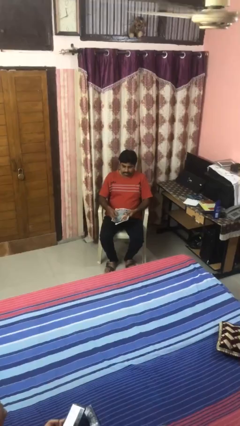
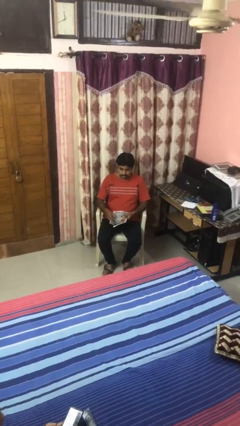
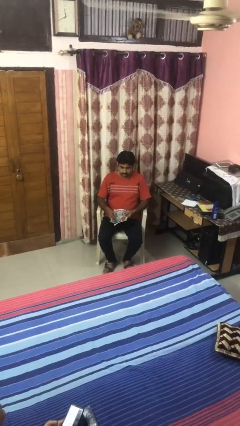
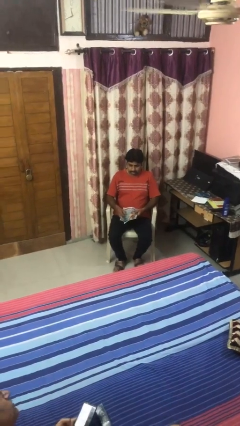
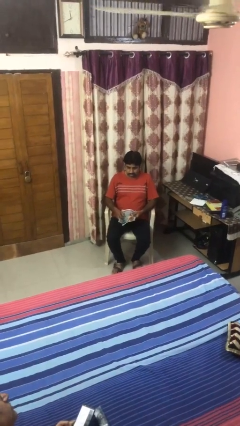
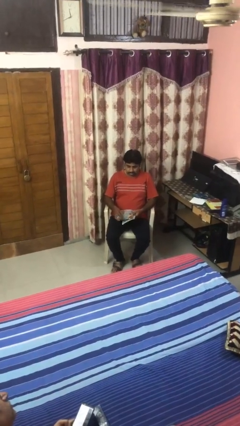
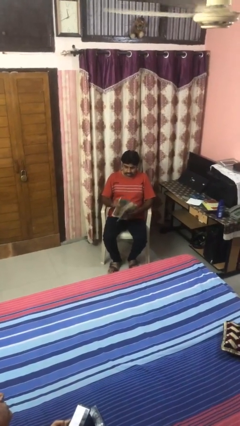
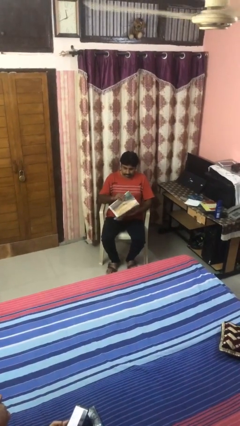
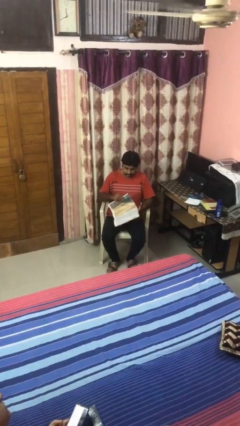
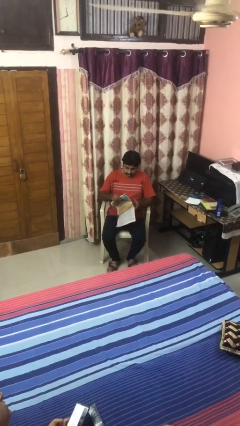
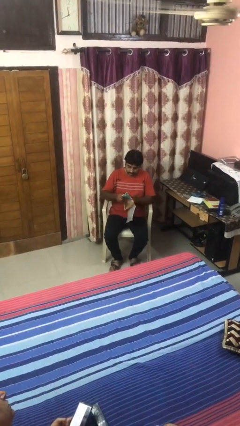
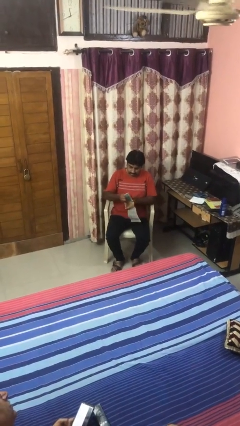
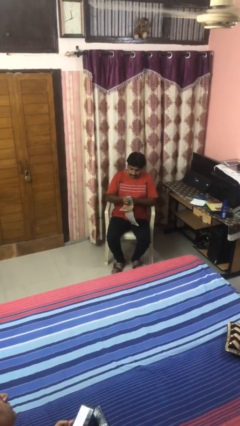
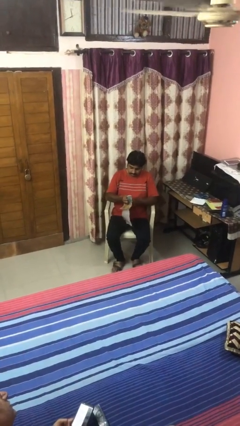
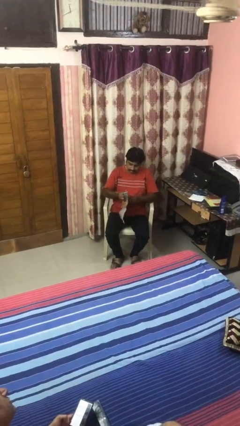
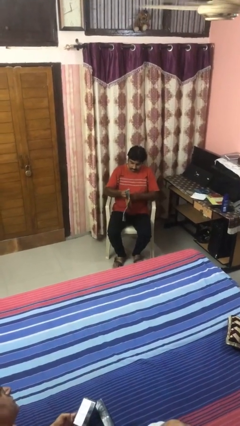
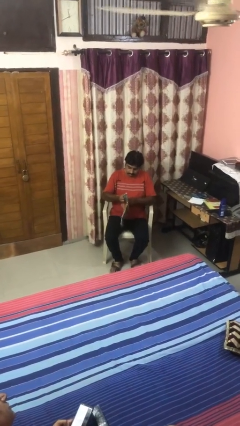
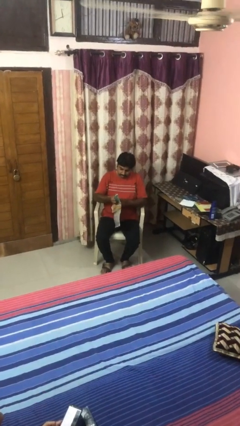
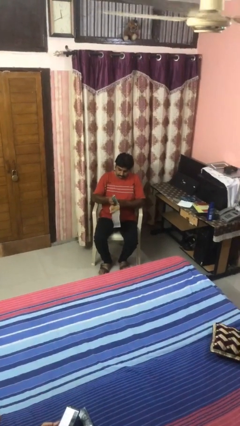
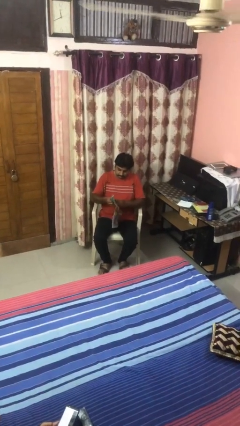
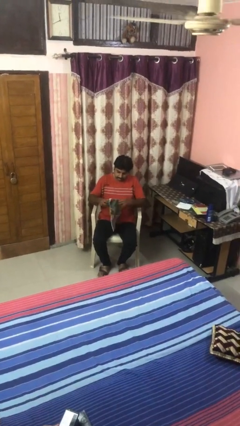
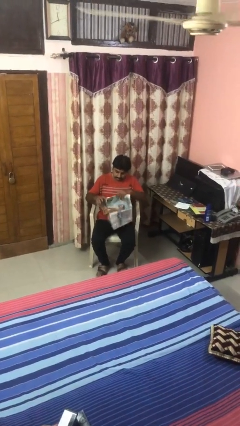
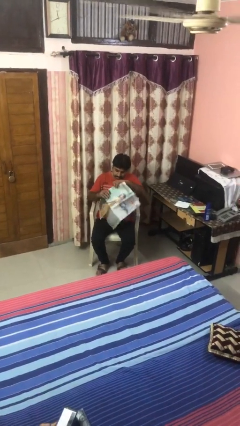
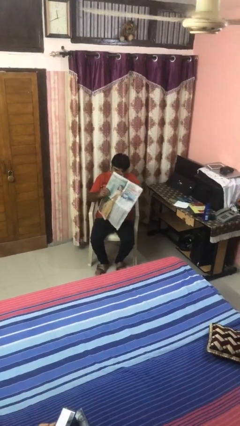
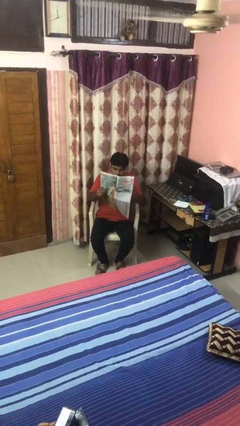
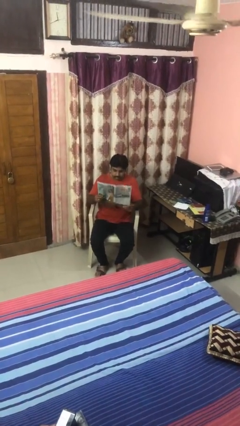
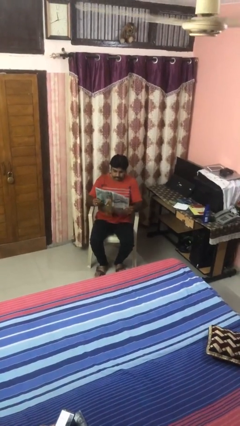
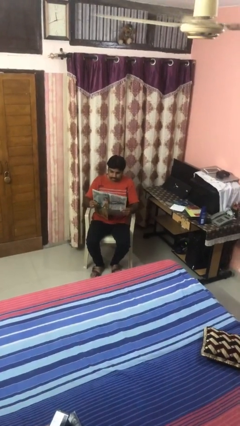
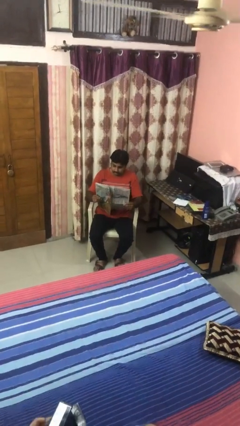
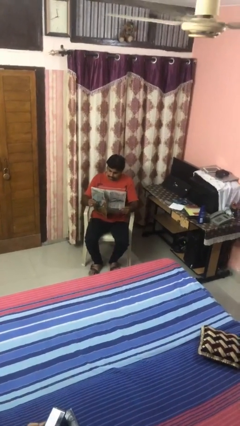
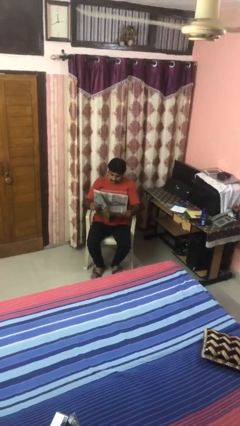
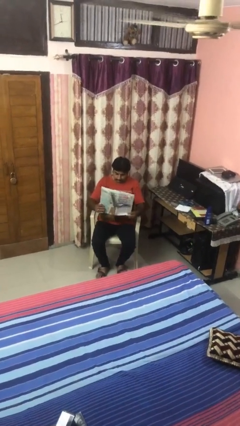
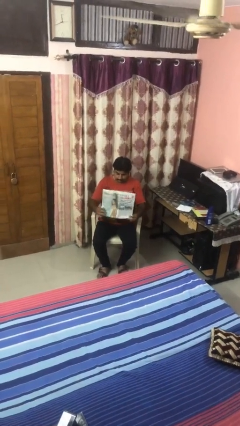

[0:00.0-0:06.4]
person reads newspaper

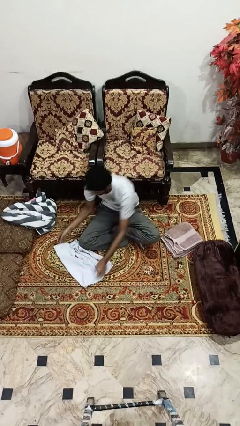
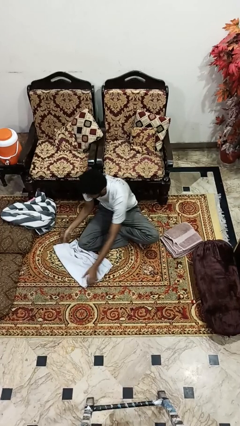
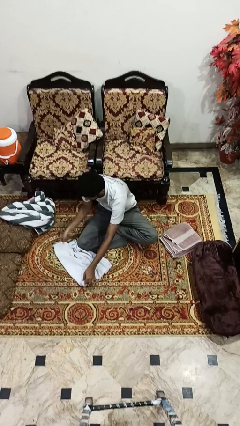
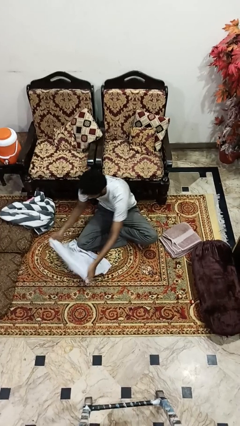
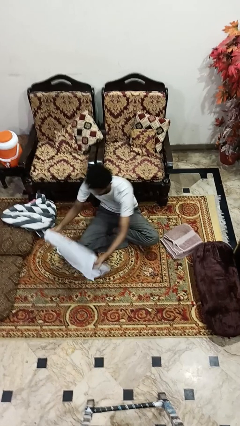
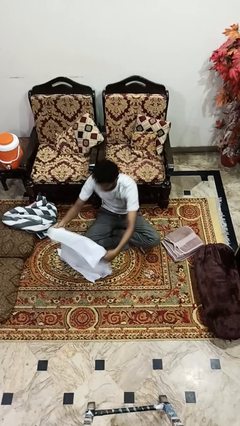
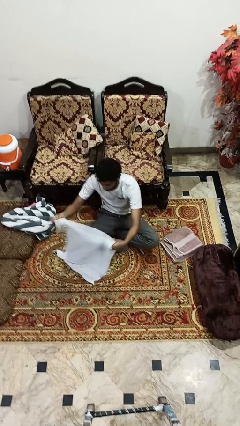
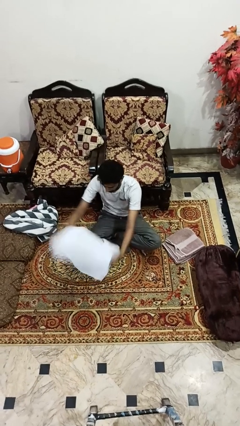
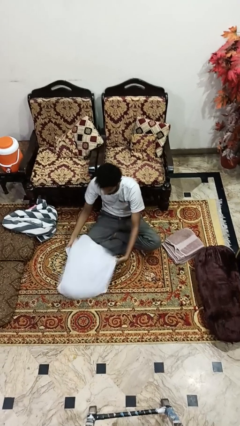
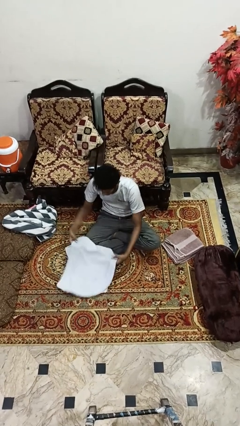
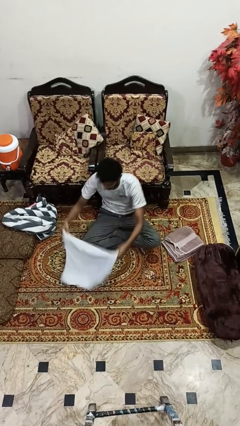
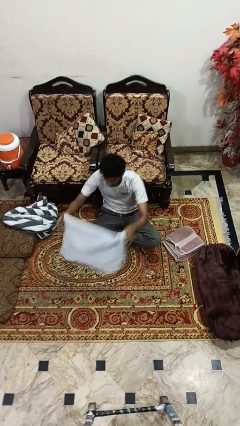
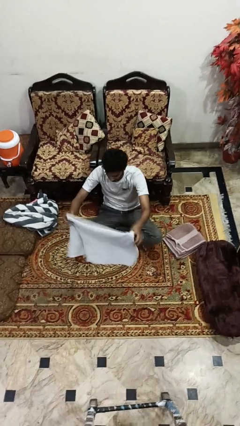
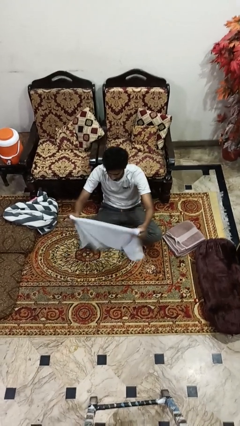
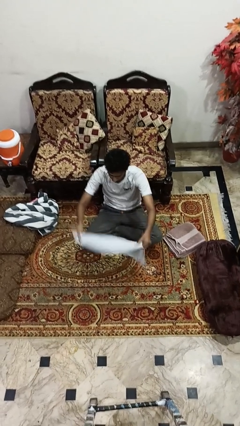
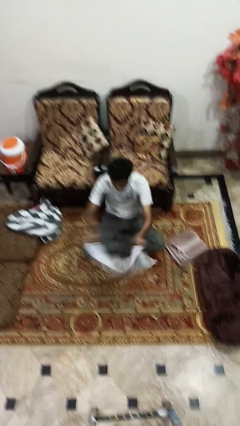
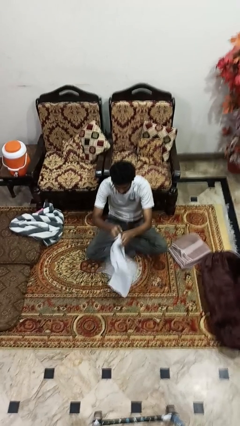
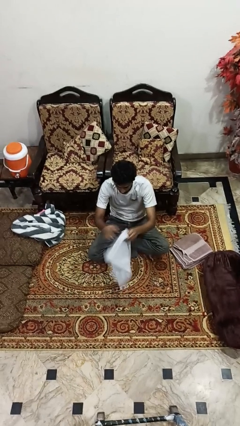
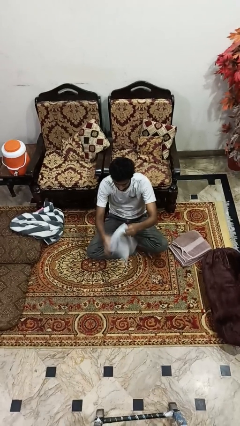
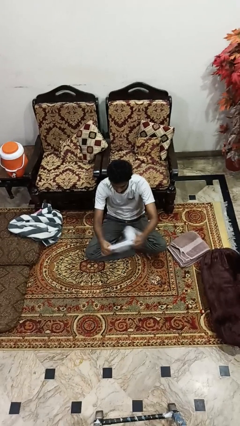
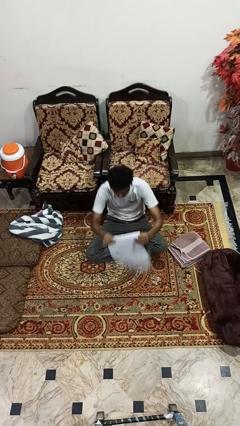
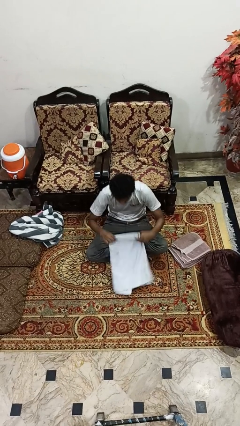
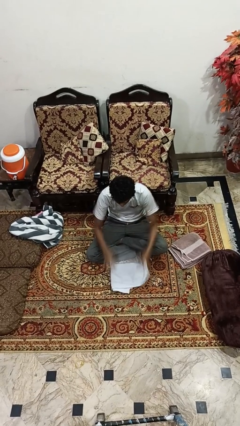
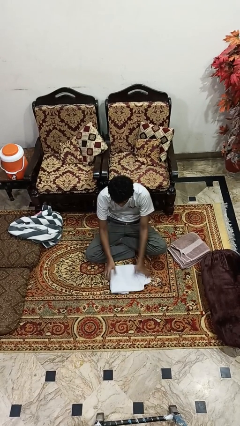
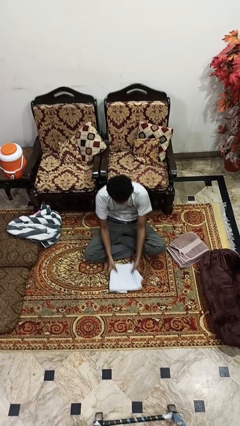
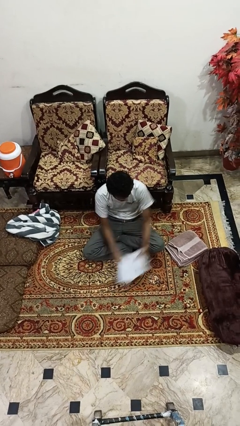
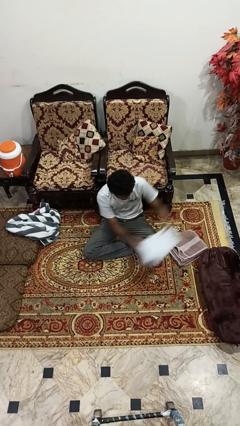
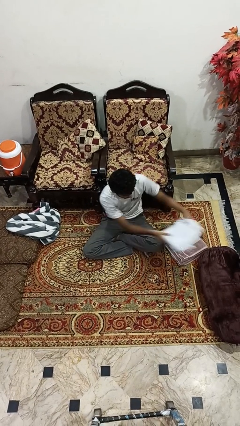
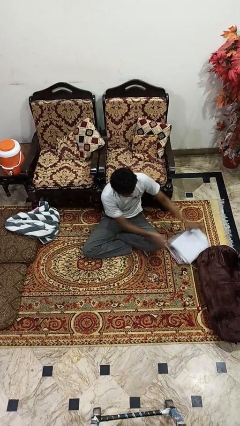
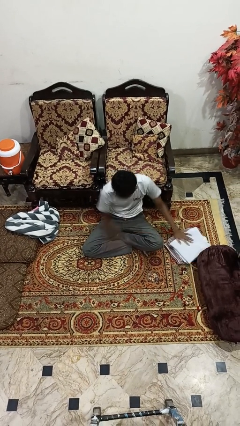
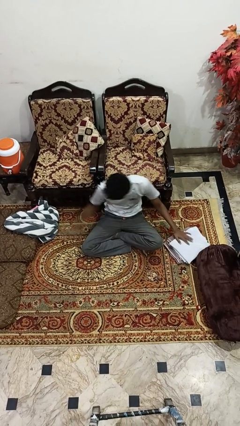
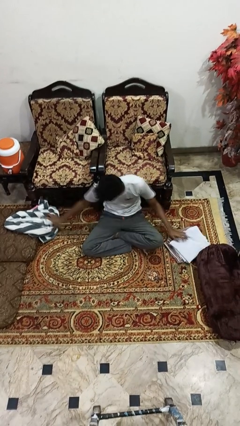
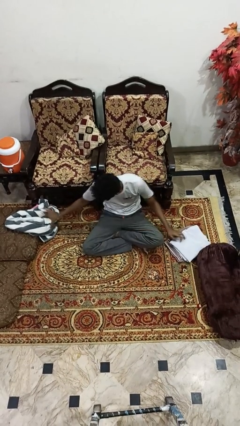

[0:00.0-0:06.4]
person folds towel

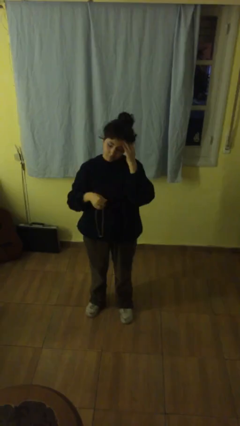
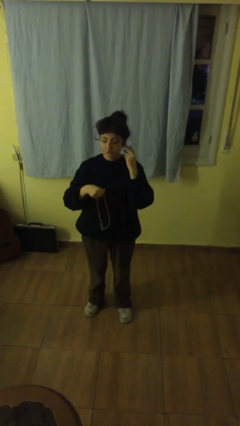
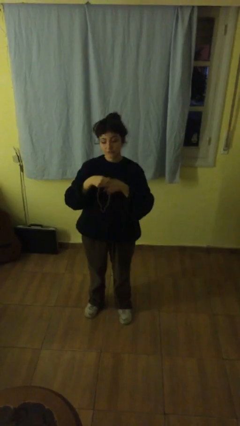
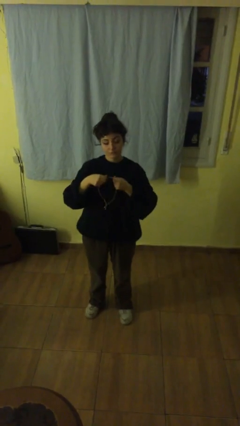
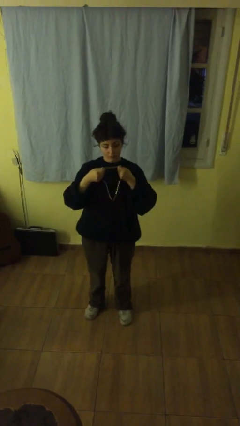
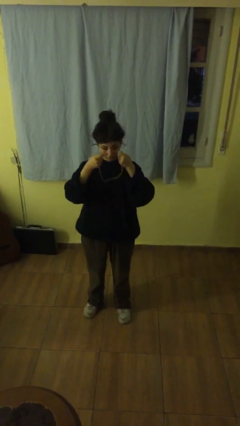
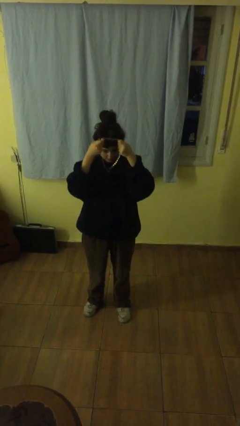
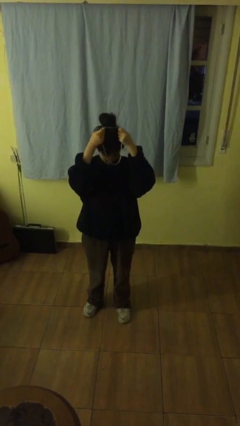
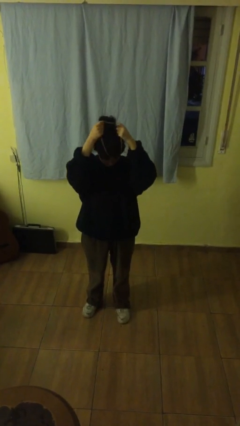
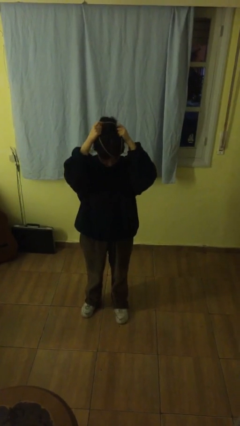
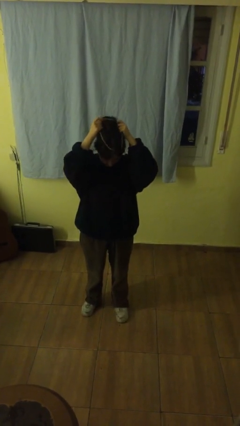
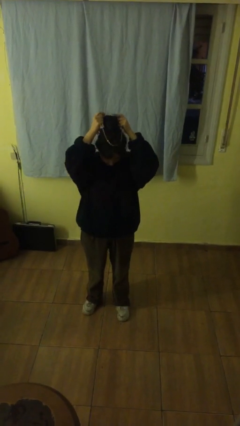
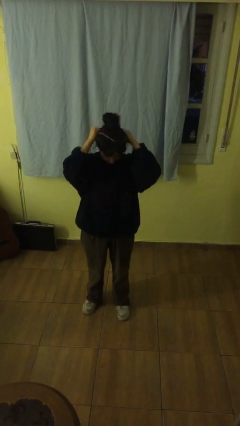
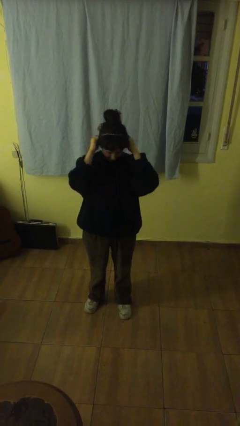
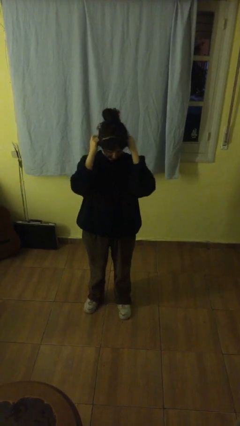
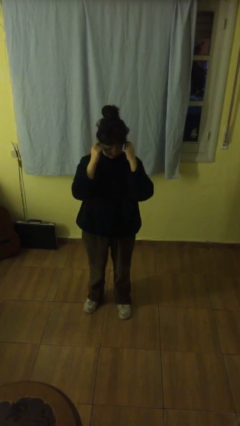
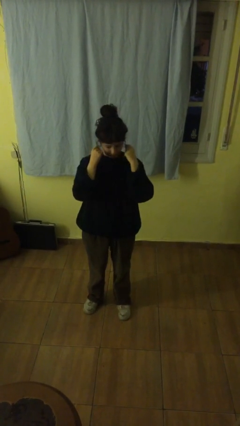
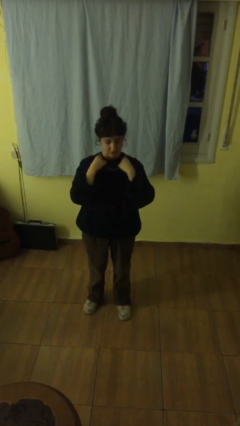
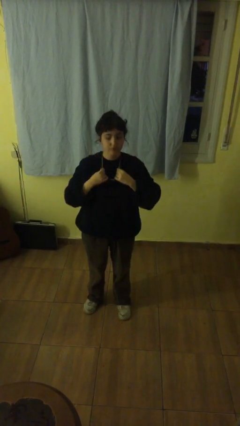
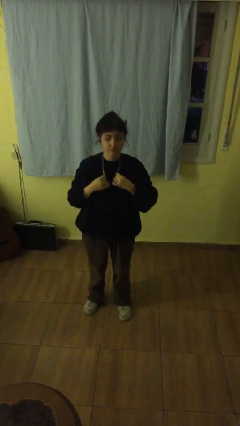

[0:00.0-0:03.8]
person puts on necklace

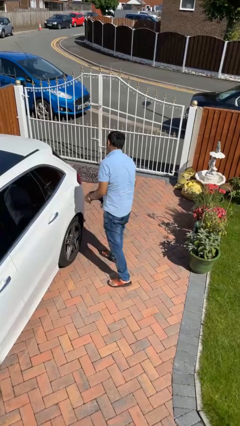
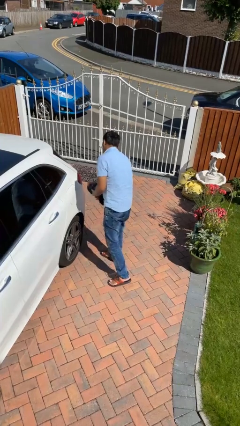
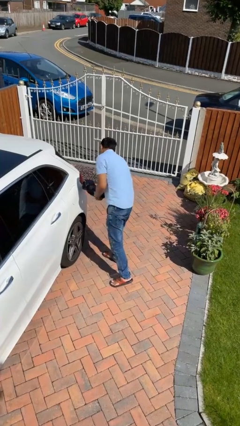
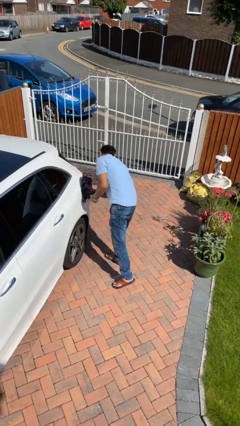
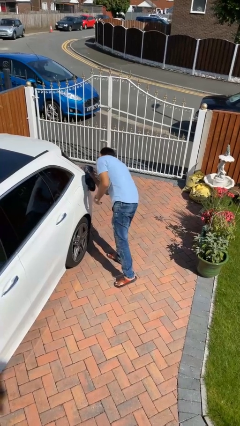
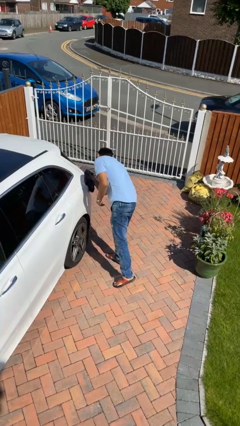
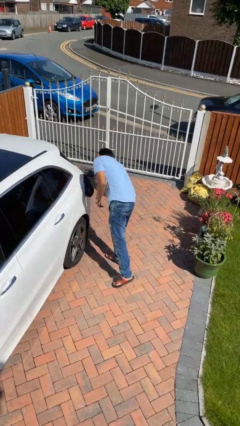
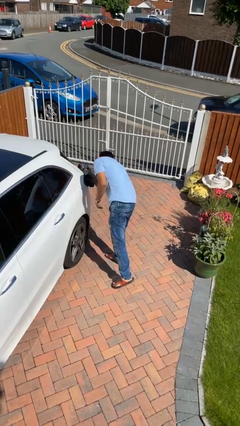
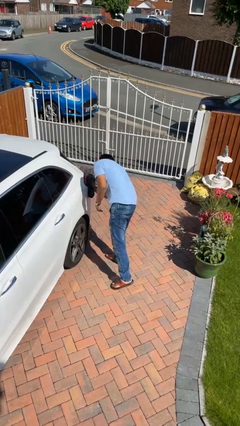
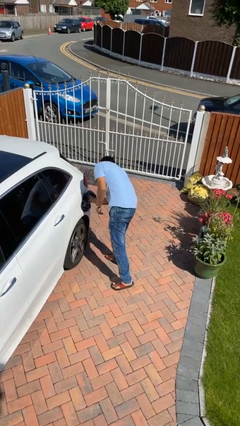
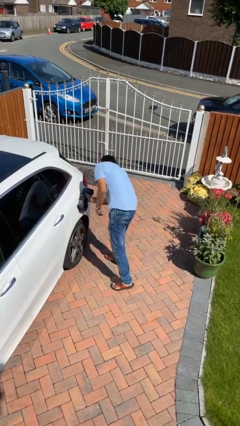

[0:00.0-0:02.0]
person polishes car with rag
